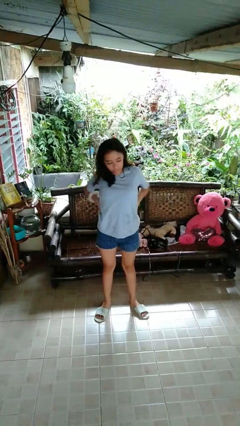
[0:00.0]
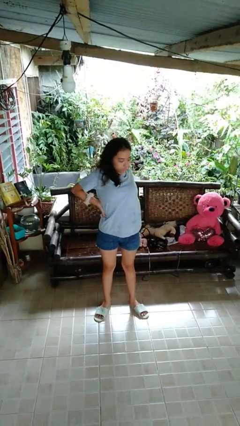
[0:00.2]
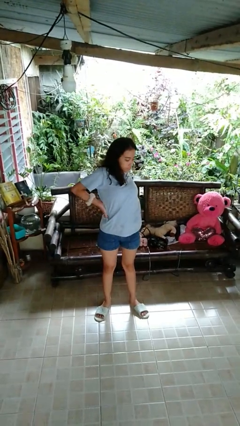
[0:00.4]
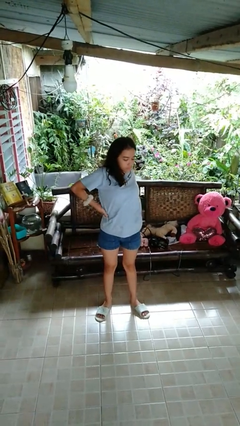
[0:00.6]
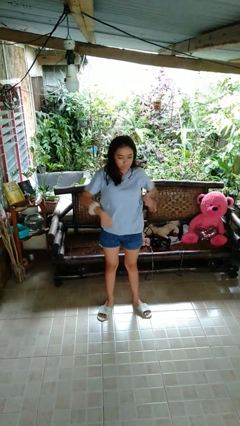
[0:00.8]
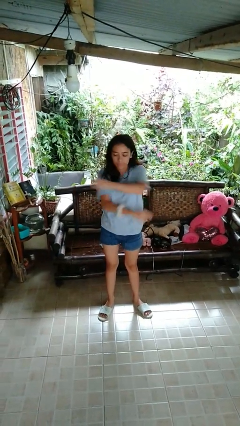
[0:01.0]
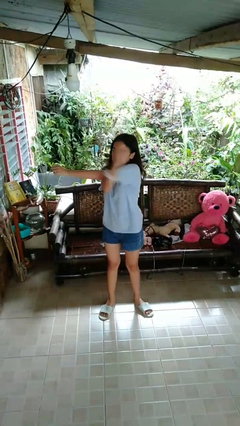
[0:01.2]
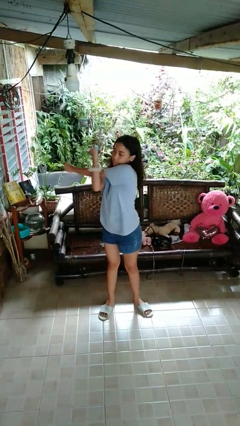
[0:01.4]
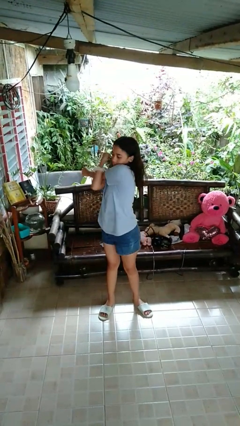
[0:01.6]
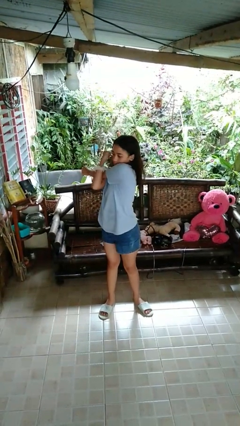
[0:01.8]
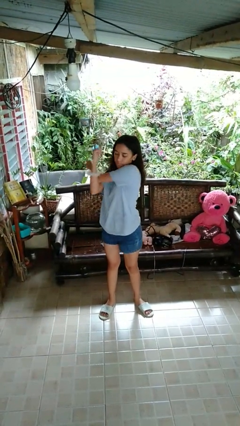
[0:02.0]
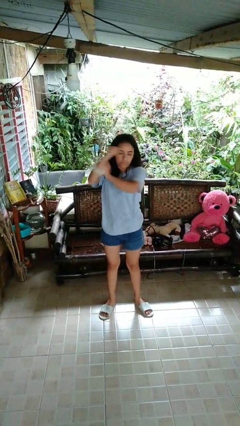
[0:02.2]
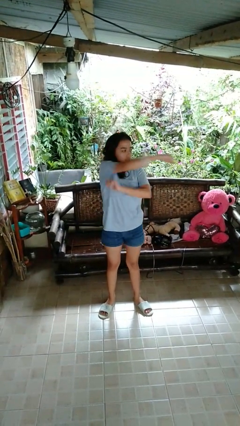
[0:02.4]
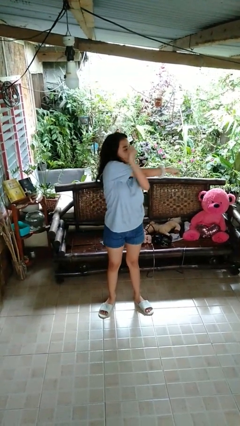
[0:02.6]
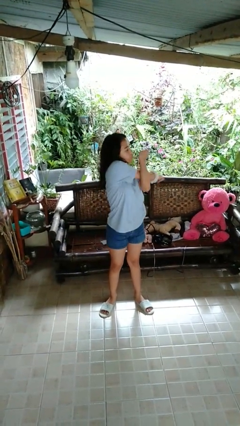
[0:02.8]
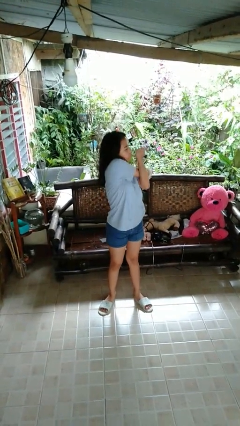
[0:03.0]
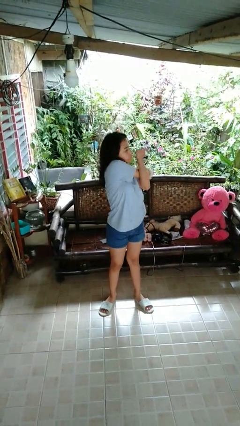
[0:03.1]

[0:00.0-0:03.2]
person stretches arms to side

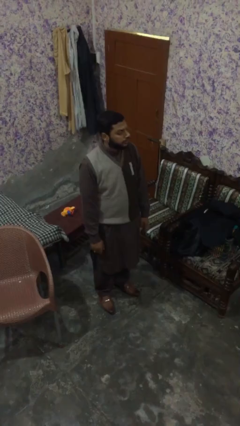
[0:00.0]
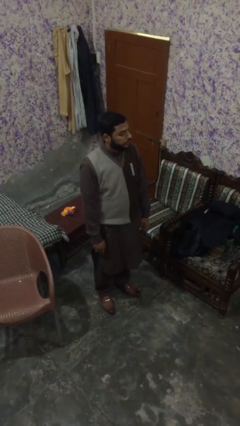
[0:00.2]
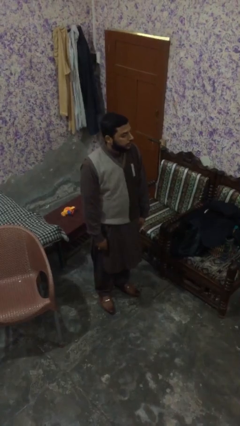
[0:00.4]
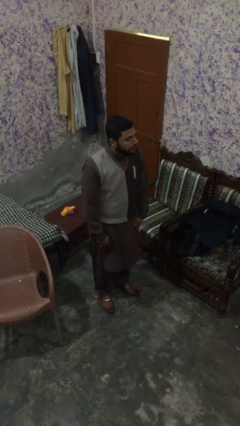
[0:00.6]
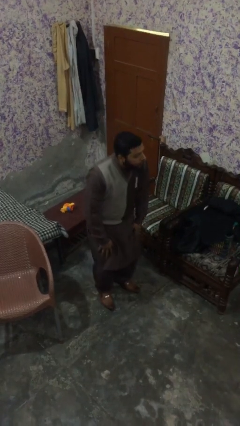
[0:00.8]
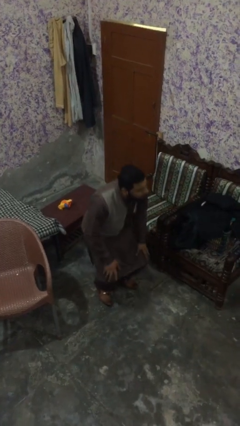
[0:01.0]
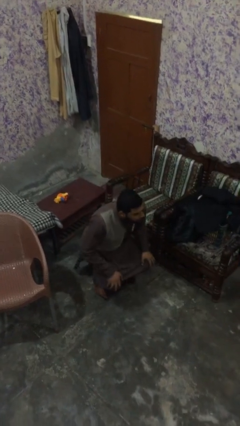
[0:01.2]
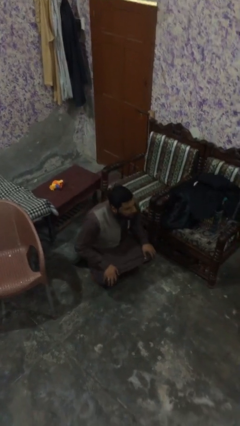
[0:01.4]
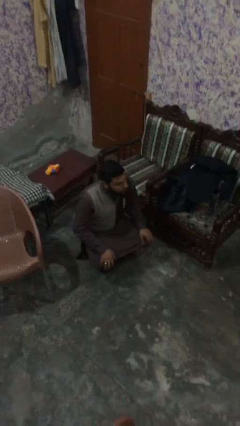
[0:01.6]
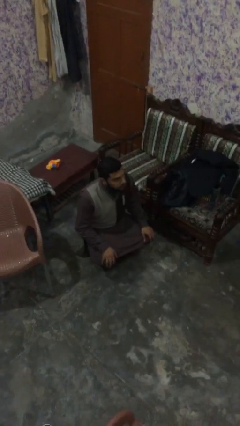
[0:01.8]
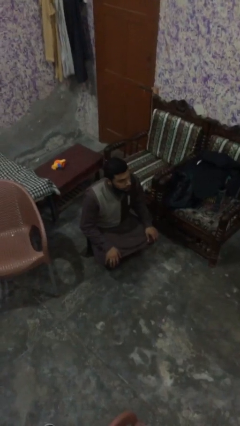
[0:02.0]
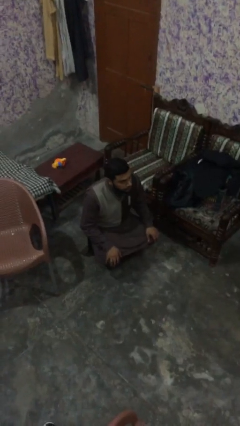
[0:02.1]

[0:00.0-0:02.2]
person sits down

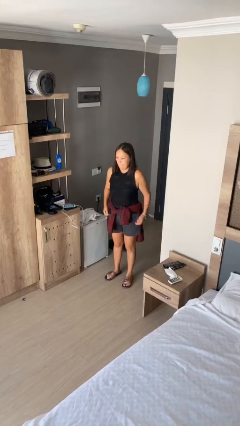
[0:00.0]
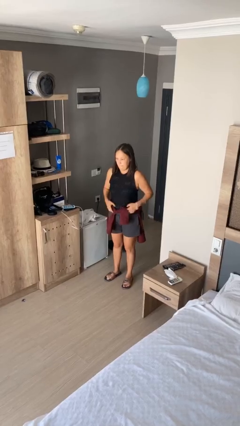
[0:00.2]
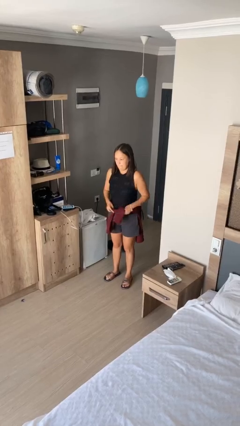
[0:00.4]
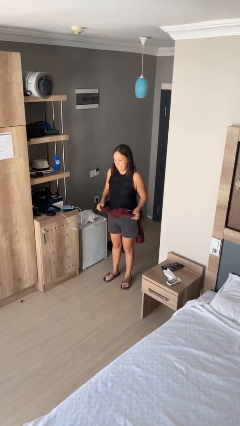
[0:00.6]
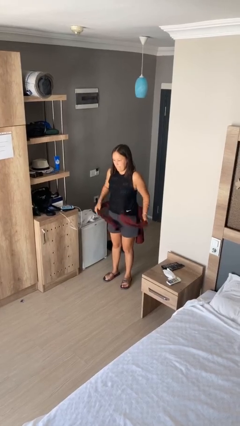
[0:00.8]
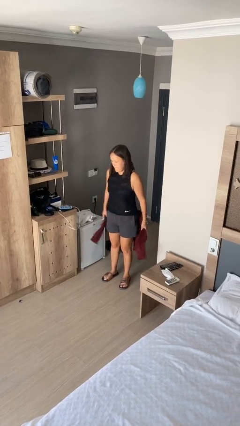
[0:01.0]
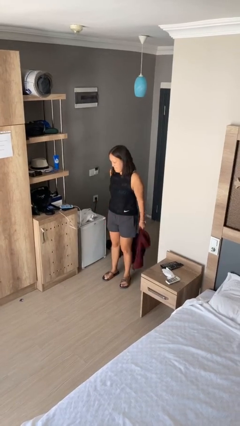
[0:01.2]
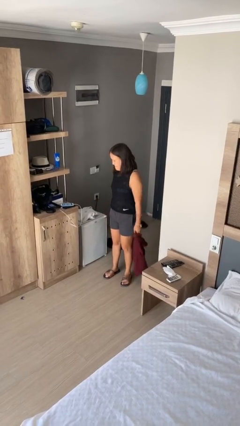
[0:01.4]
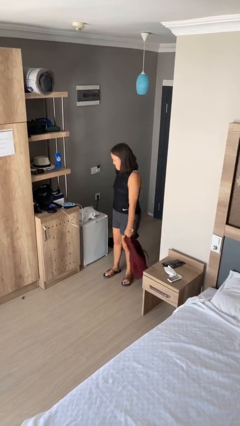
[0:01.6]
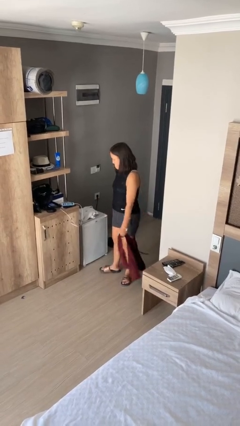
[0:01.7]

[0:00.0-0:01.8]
person unties jacket around waist

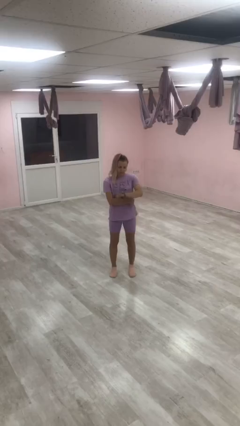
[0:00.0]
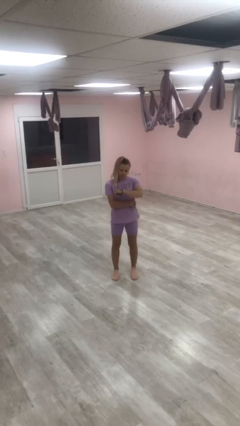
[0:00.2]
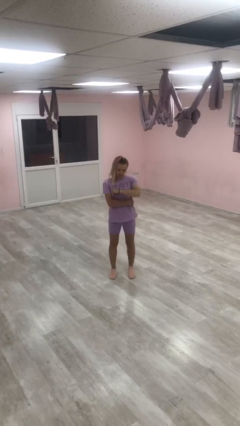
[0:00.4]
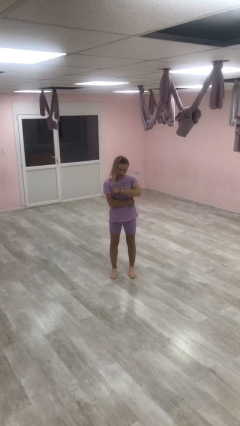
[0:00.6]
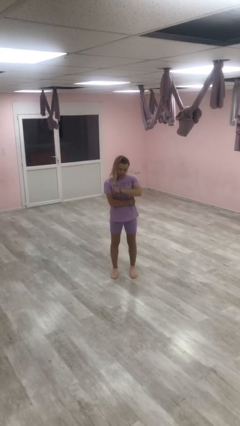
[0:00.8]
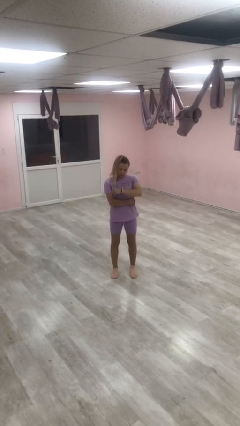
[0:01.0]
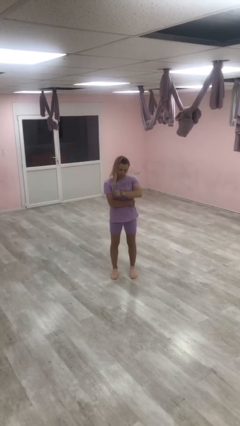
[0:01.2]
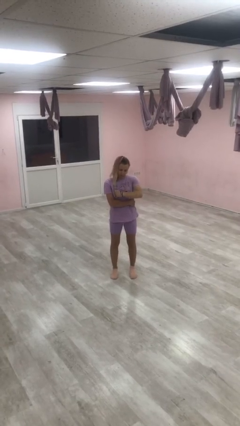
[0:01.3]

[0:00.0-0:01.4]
person looks at wristwatch

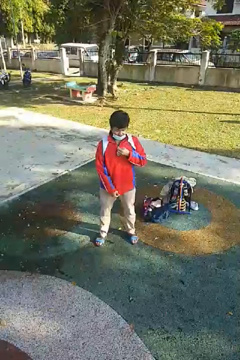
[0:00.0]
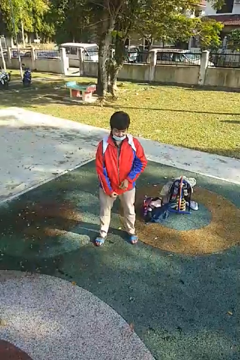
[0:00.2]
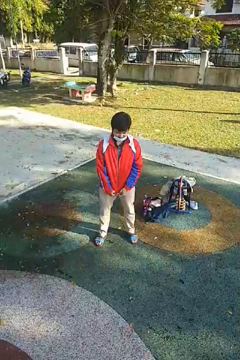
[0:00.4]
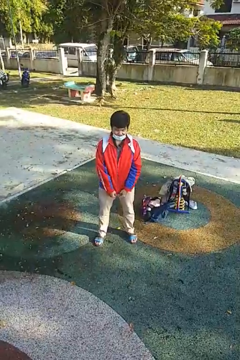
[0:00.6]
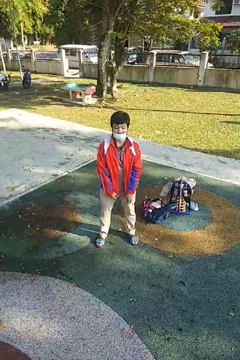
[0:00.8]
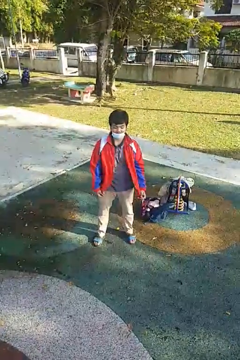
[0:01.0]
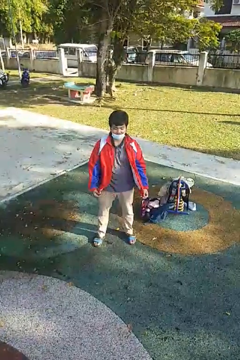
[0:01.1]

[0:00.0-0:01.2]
person unzips jacket

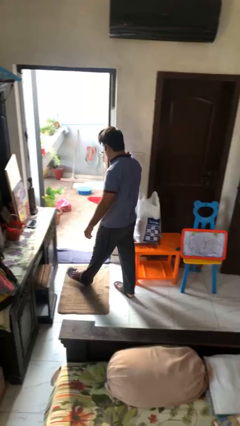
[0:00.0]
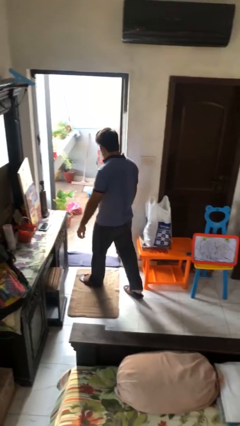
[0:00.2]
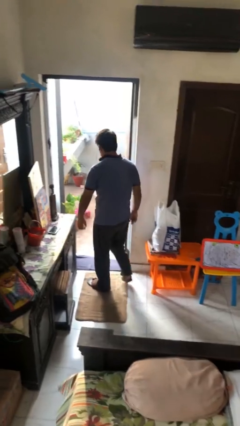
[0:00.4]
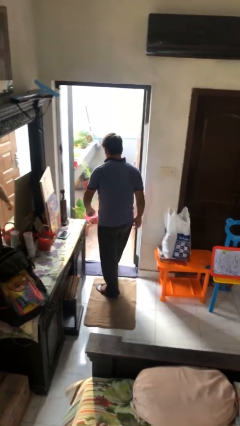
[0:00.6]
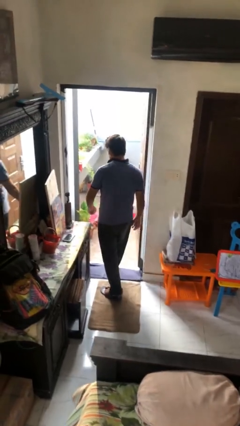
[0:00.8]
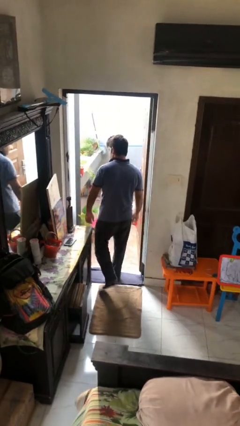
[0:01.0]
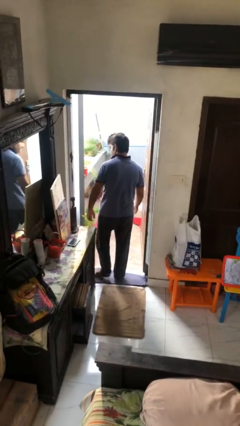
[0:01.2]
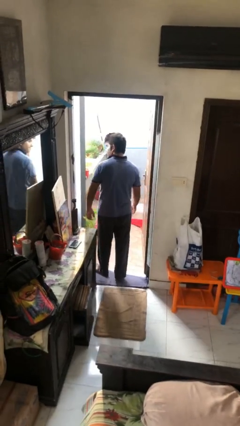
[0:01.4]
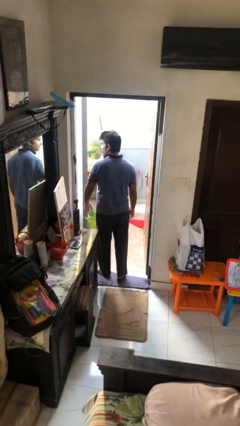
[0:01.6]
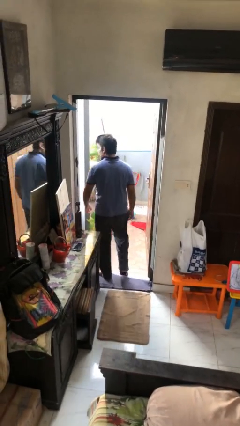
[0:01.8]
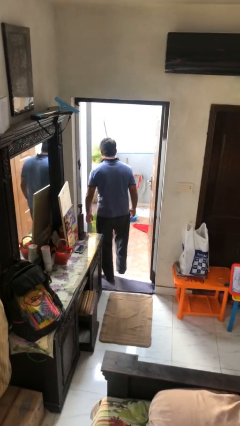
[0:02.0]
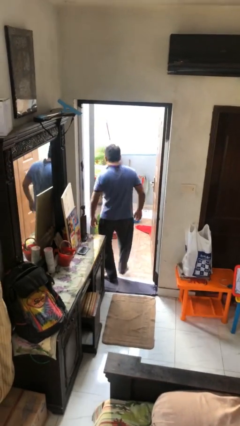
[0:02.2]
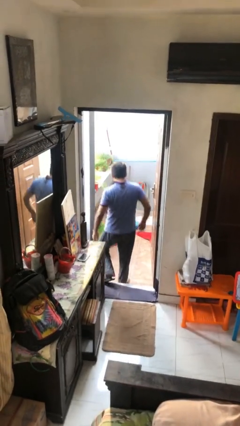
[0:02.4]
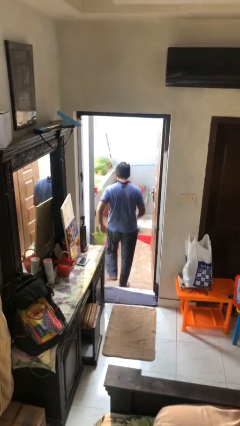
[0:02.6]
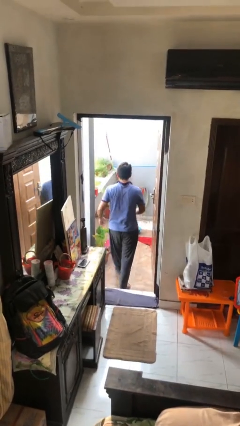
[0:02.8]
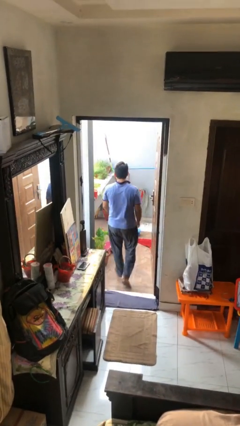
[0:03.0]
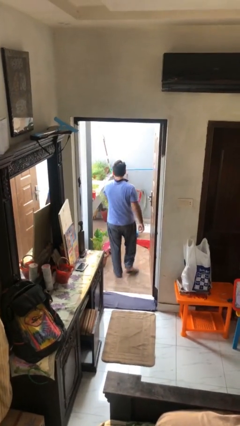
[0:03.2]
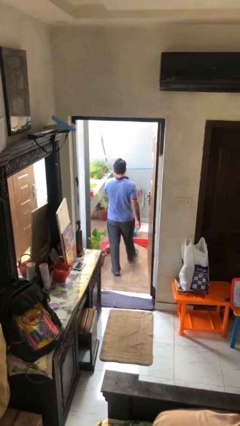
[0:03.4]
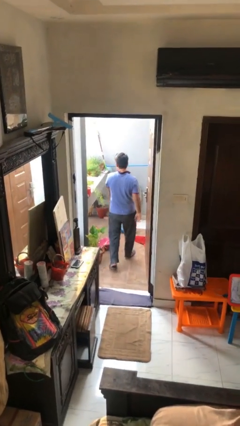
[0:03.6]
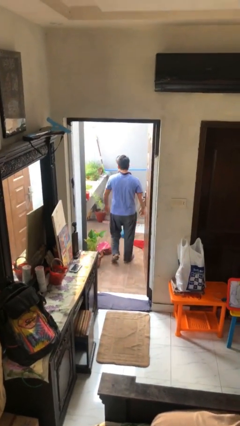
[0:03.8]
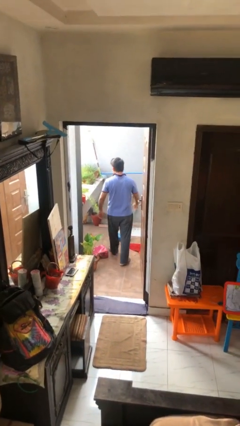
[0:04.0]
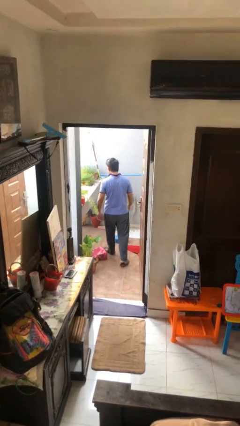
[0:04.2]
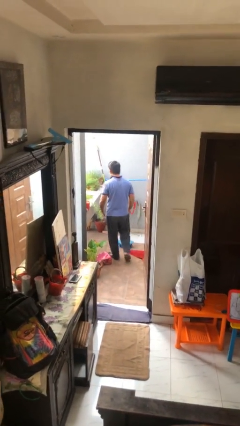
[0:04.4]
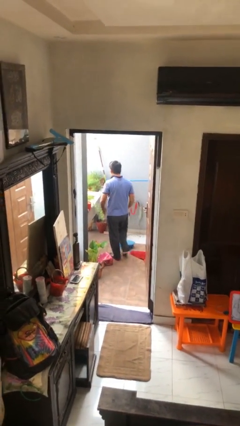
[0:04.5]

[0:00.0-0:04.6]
person exits scene through structure

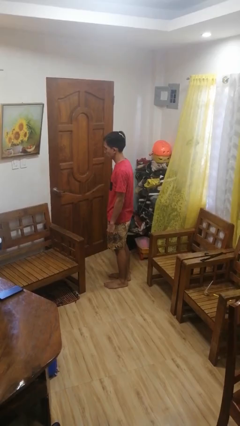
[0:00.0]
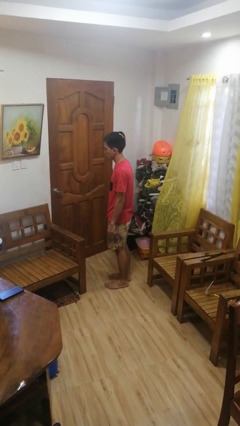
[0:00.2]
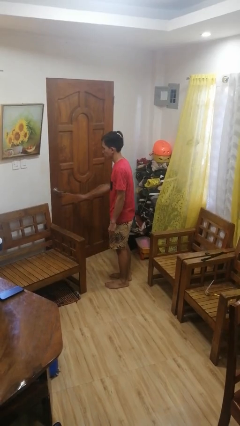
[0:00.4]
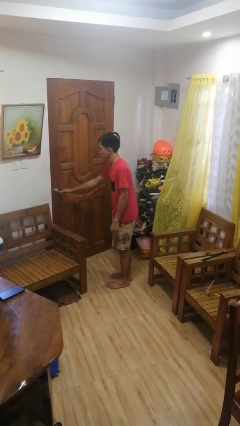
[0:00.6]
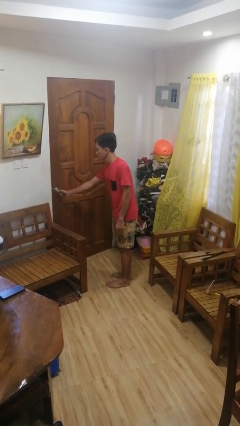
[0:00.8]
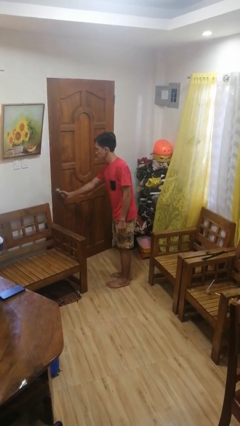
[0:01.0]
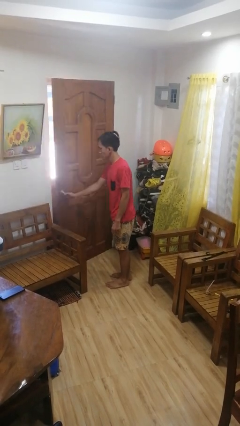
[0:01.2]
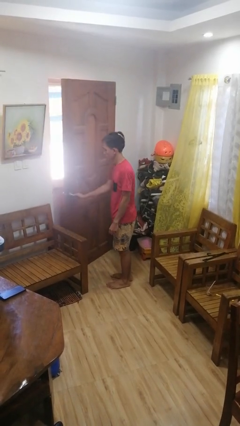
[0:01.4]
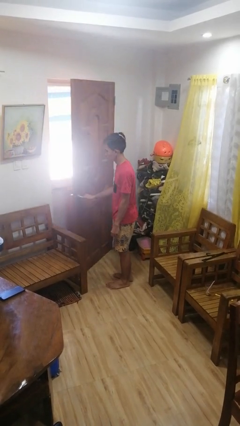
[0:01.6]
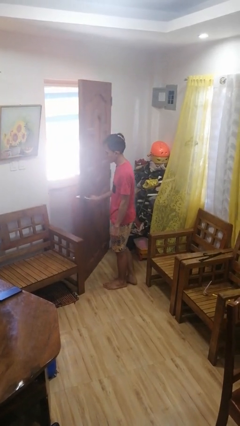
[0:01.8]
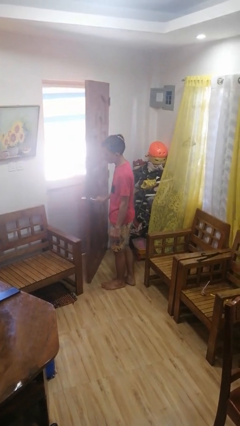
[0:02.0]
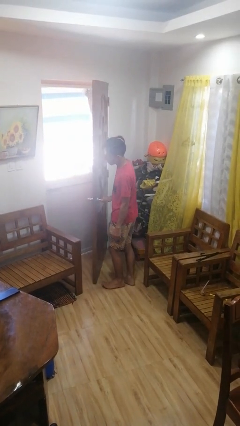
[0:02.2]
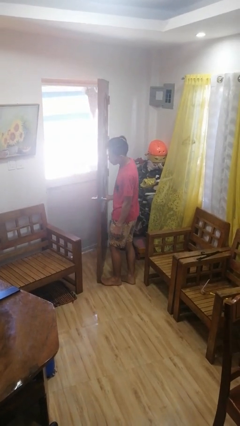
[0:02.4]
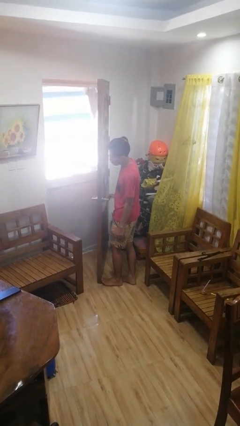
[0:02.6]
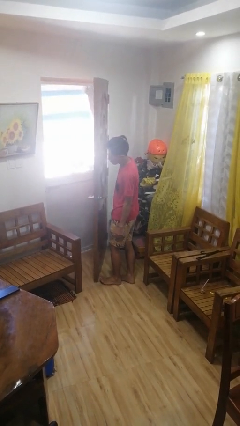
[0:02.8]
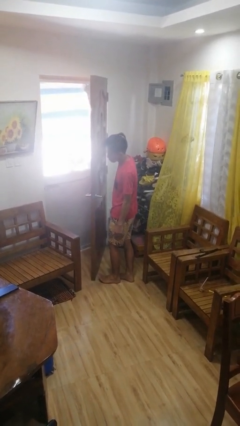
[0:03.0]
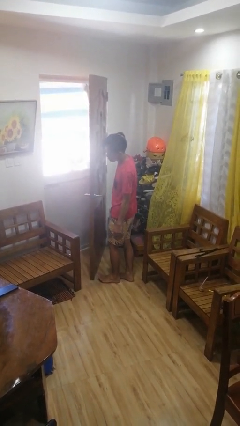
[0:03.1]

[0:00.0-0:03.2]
person opens facility door
